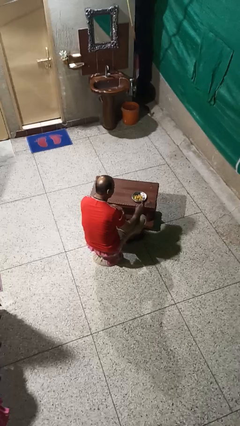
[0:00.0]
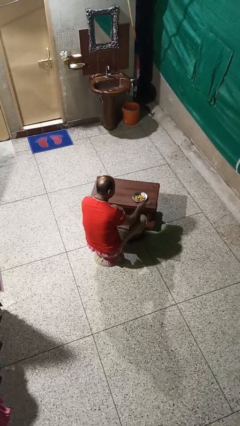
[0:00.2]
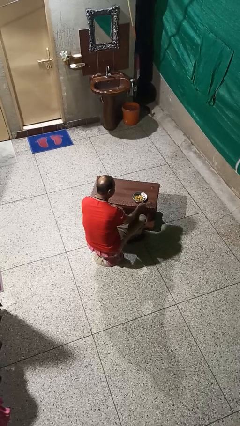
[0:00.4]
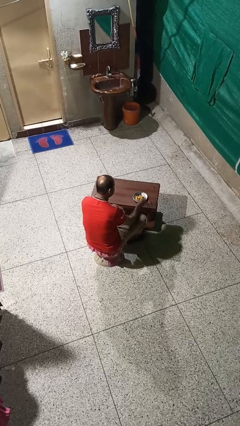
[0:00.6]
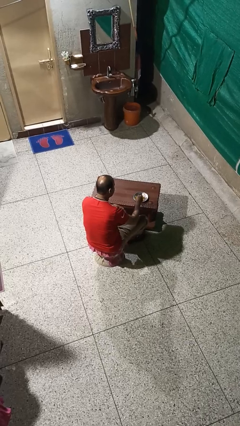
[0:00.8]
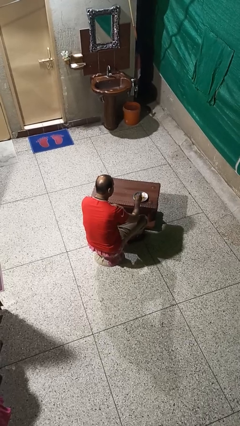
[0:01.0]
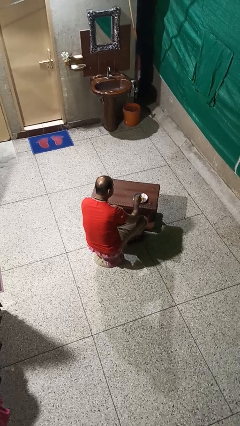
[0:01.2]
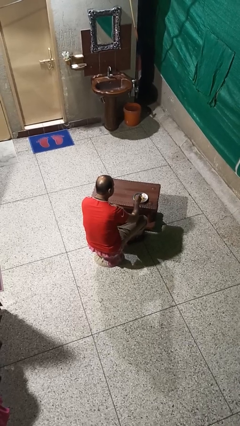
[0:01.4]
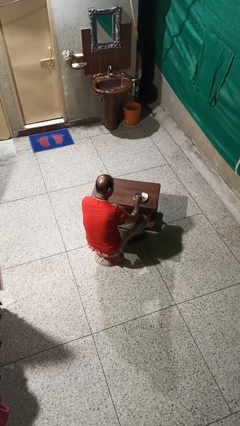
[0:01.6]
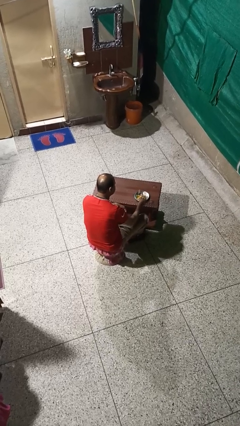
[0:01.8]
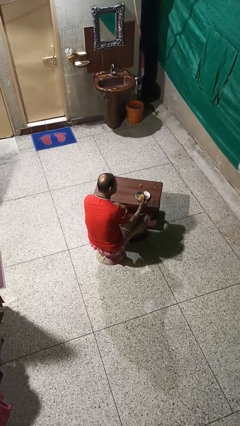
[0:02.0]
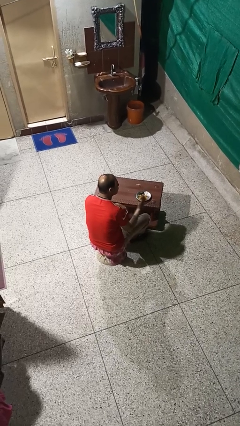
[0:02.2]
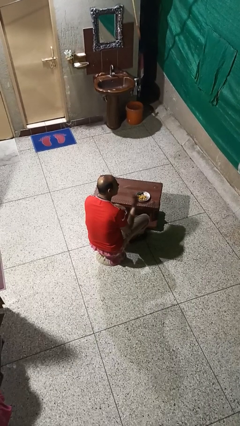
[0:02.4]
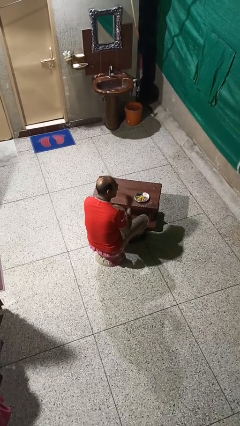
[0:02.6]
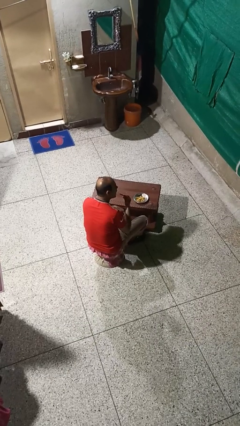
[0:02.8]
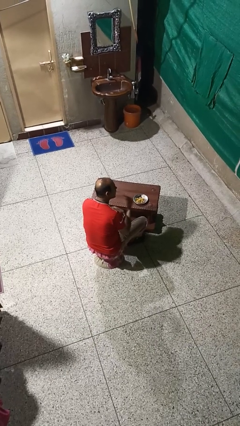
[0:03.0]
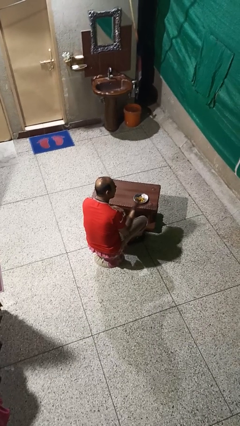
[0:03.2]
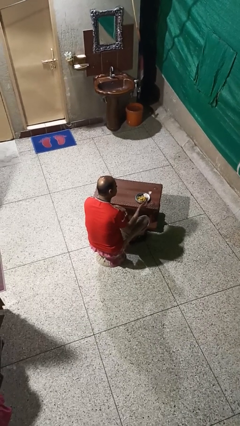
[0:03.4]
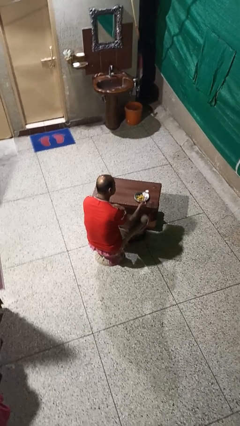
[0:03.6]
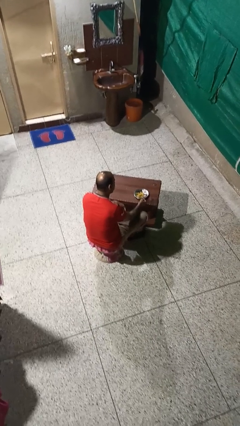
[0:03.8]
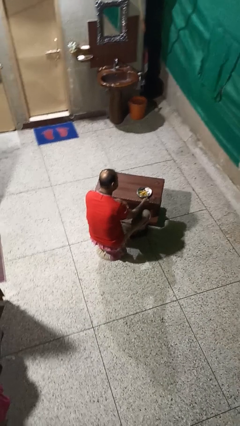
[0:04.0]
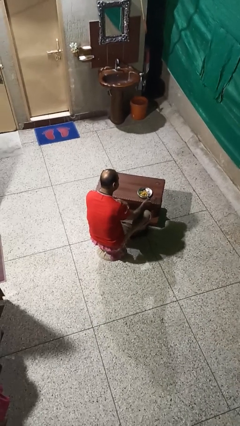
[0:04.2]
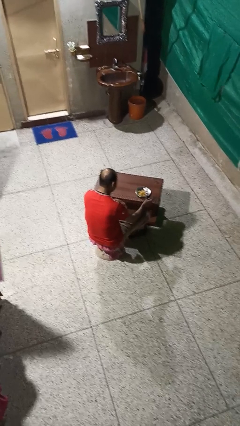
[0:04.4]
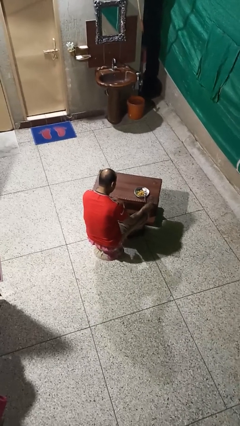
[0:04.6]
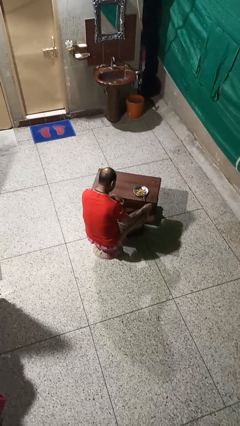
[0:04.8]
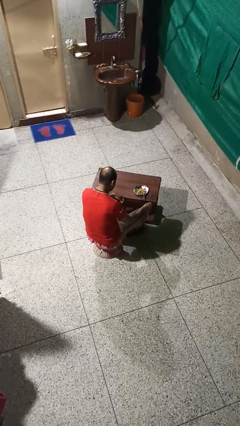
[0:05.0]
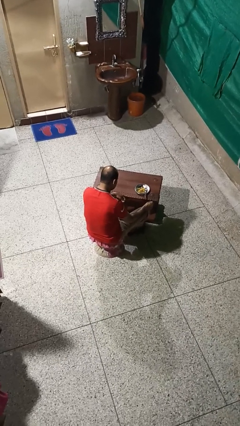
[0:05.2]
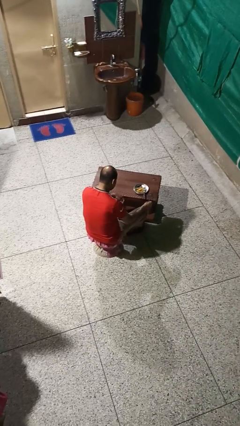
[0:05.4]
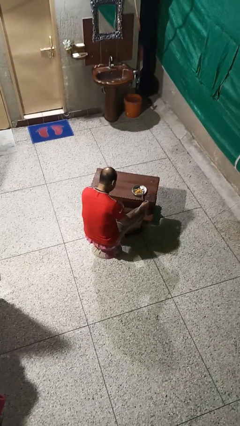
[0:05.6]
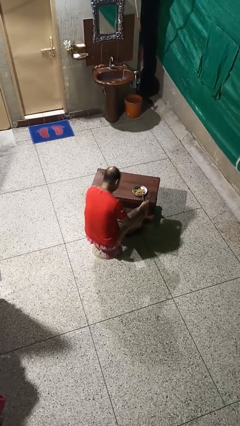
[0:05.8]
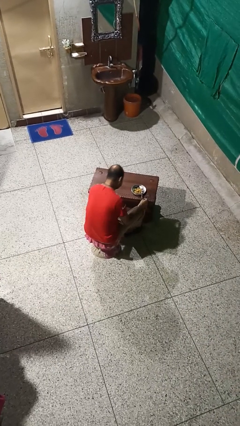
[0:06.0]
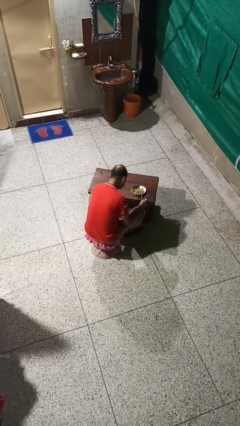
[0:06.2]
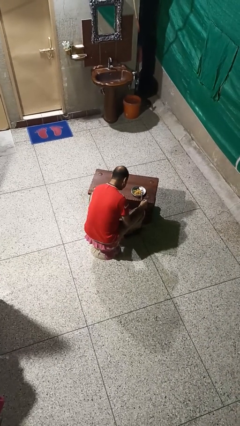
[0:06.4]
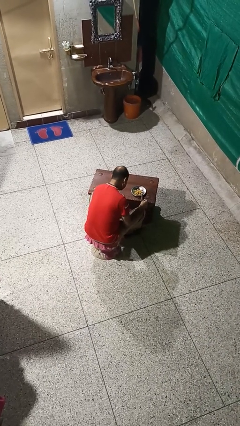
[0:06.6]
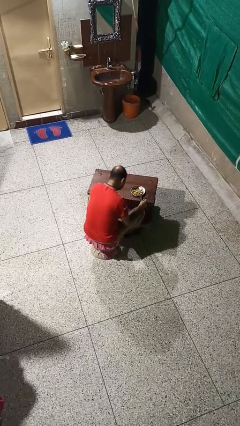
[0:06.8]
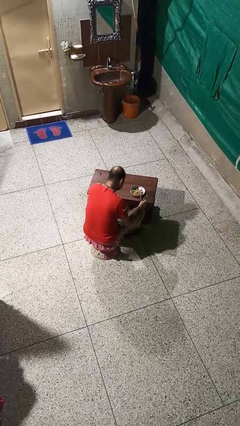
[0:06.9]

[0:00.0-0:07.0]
person eats with utensil

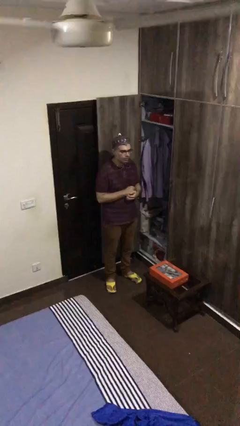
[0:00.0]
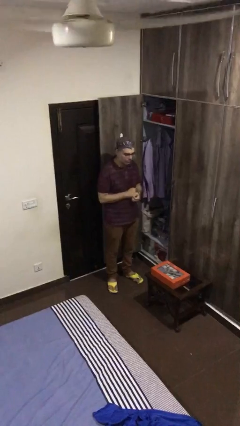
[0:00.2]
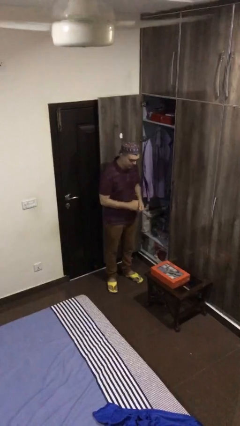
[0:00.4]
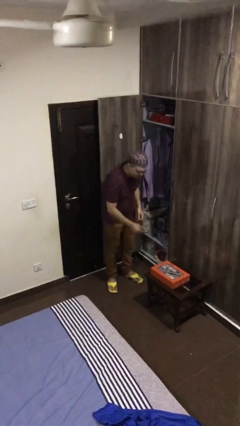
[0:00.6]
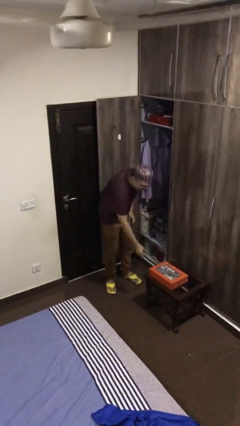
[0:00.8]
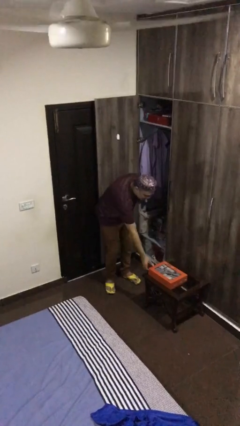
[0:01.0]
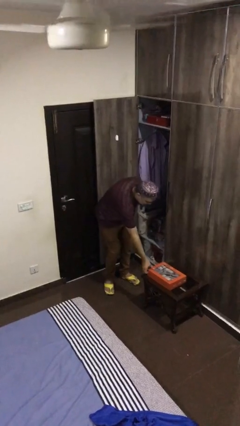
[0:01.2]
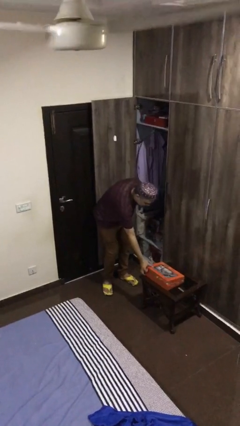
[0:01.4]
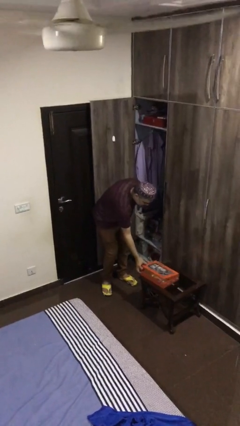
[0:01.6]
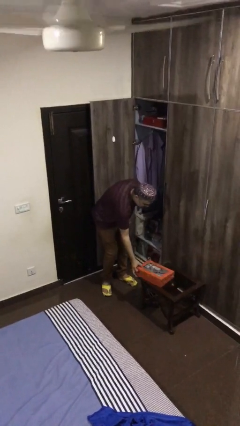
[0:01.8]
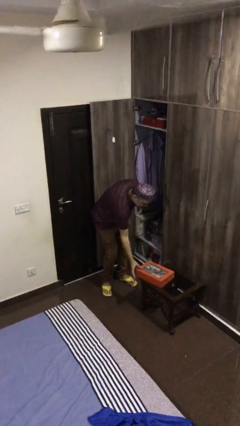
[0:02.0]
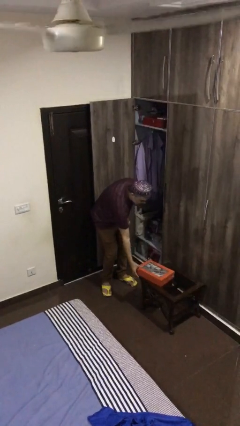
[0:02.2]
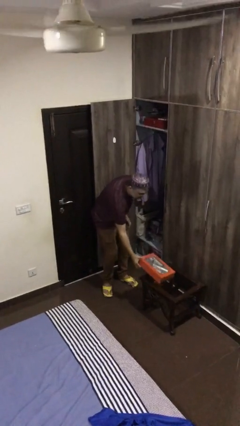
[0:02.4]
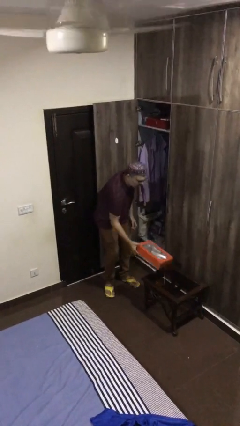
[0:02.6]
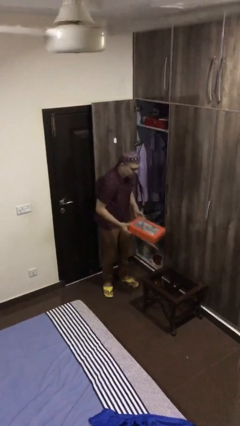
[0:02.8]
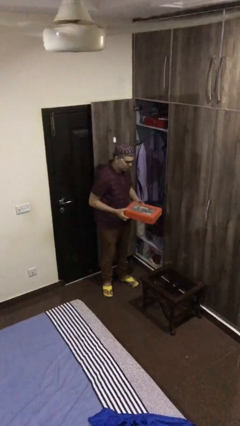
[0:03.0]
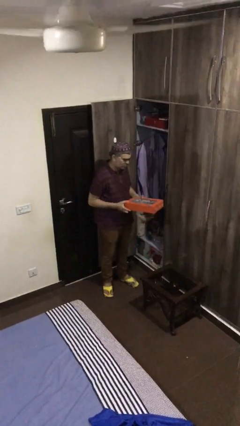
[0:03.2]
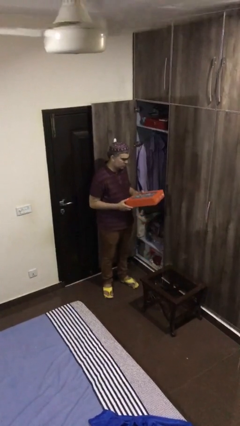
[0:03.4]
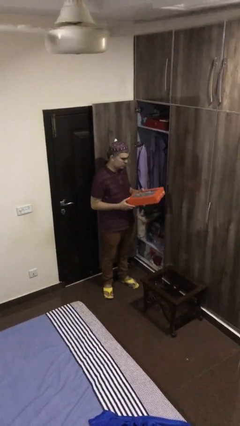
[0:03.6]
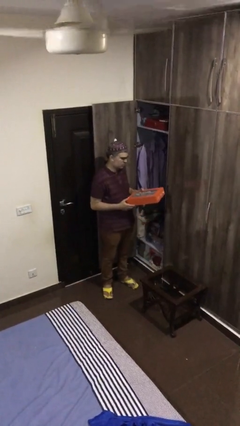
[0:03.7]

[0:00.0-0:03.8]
person picks up object from table

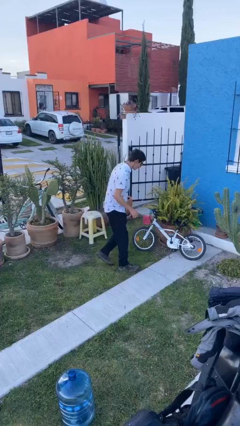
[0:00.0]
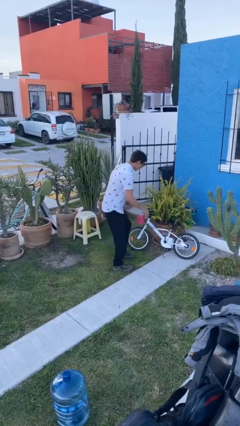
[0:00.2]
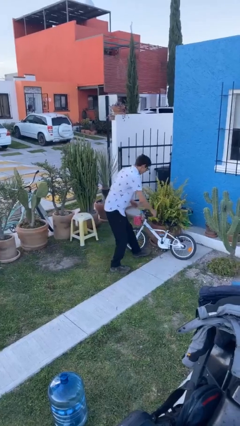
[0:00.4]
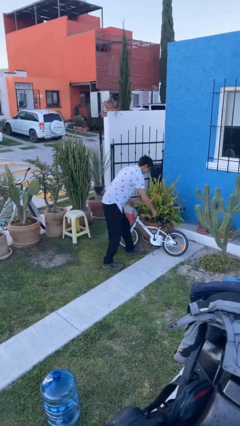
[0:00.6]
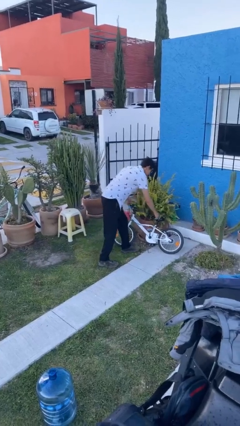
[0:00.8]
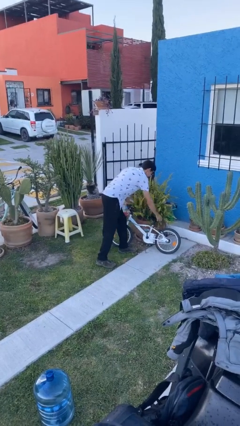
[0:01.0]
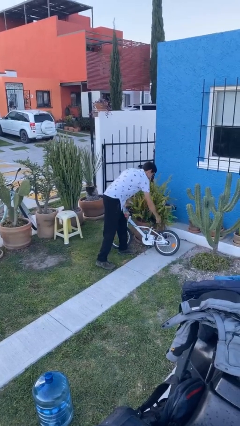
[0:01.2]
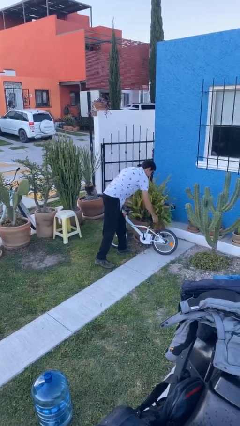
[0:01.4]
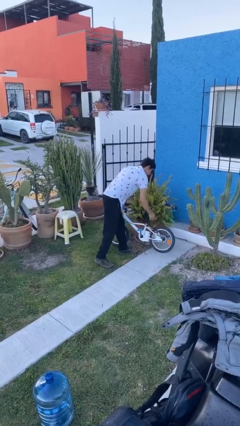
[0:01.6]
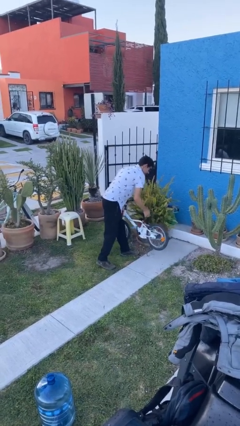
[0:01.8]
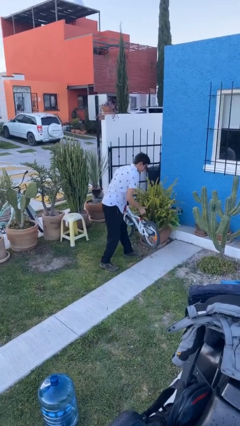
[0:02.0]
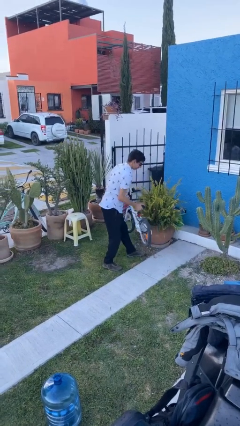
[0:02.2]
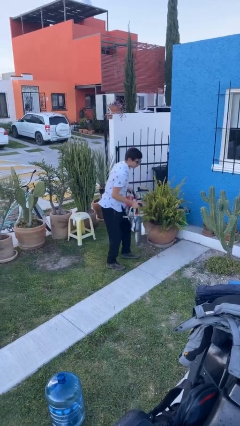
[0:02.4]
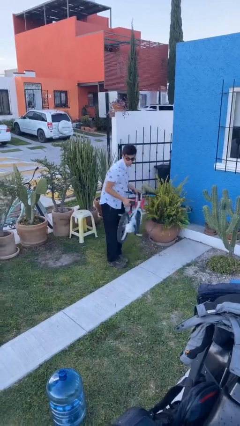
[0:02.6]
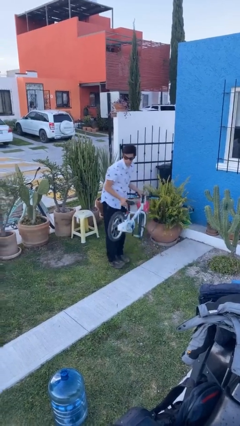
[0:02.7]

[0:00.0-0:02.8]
person picks up object from floor

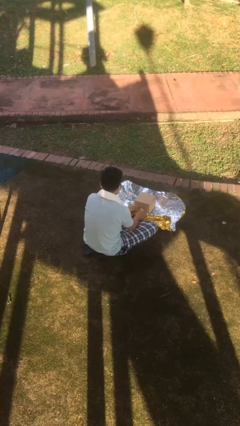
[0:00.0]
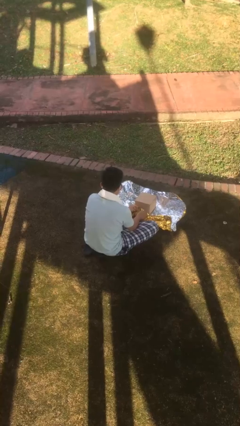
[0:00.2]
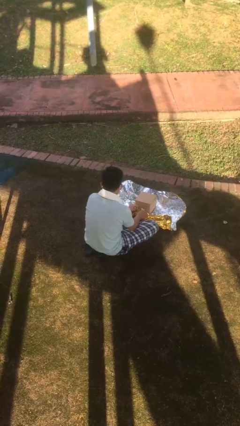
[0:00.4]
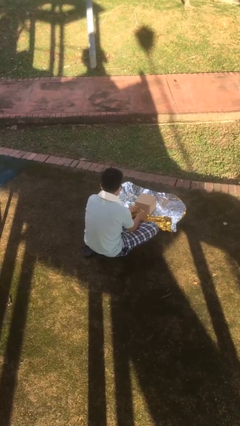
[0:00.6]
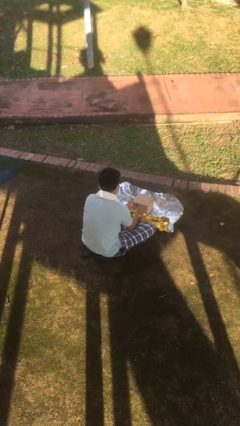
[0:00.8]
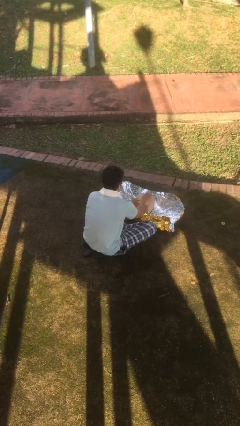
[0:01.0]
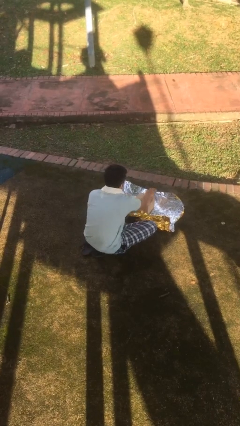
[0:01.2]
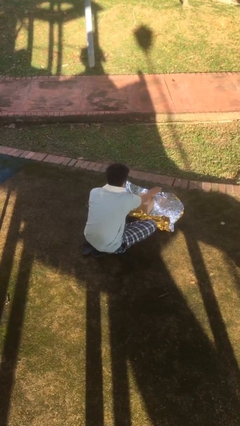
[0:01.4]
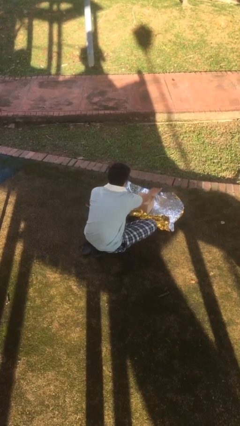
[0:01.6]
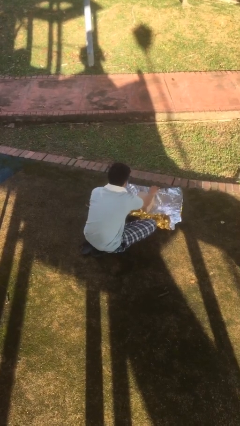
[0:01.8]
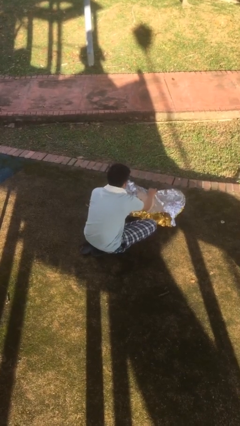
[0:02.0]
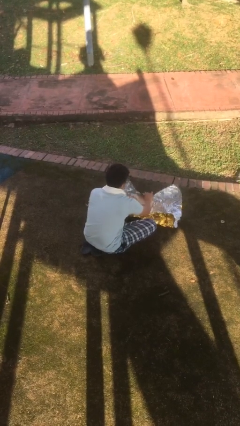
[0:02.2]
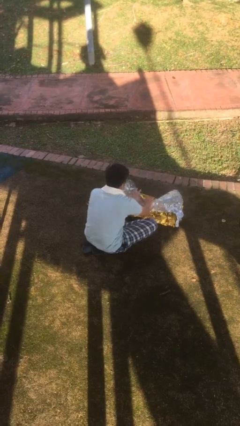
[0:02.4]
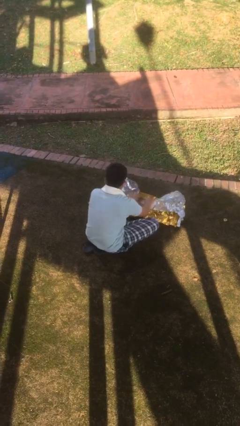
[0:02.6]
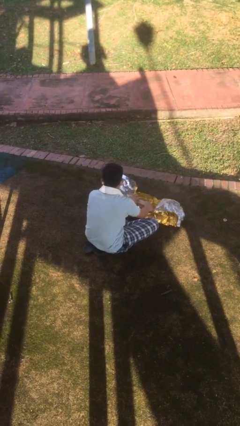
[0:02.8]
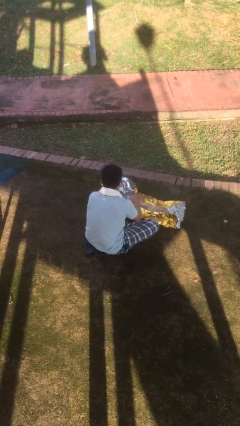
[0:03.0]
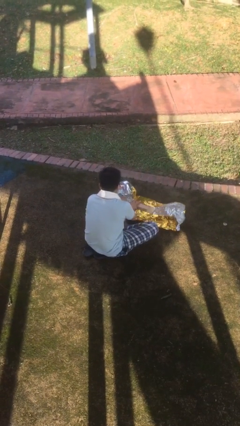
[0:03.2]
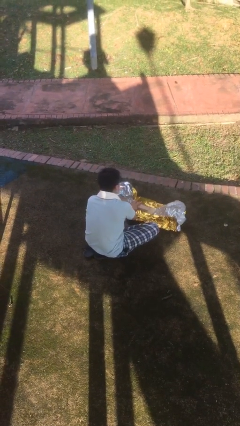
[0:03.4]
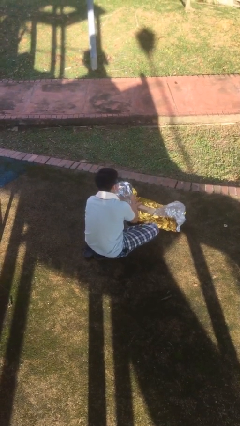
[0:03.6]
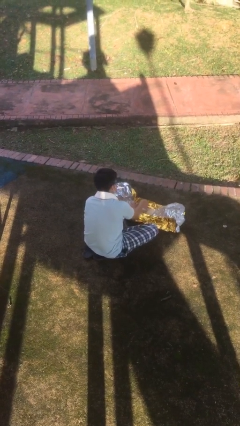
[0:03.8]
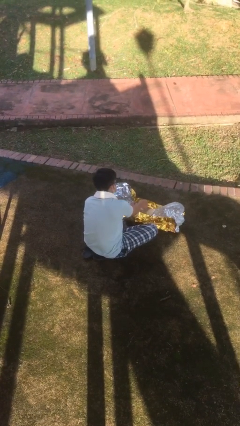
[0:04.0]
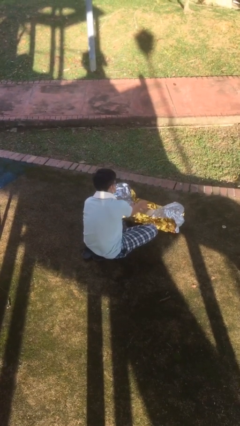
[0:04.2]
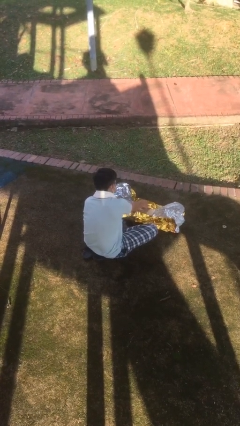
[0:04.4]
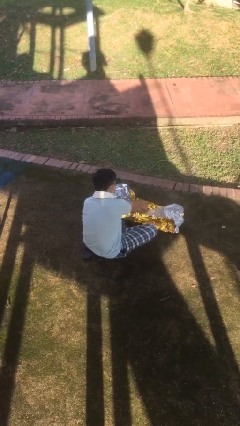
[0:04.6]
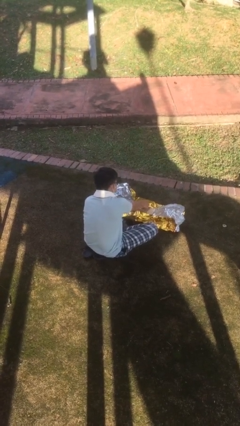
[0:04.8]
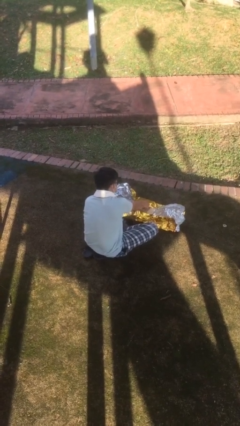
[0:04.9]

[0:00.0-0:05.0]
person wraps box
